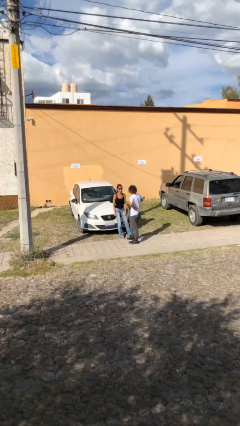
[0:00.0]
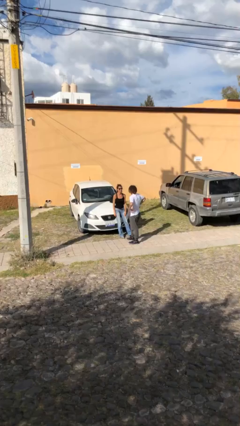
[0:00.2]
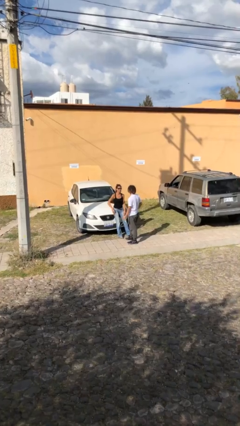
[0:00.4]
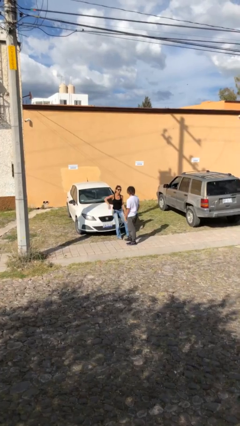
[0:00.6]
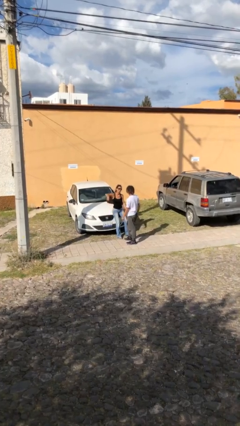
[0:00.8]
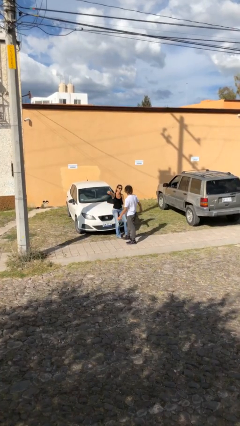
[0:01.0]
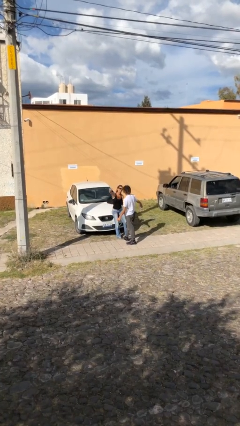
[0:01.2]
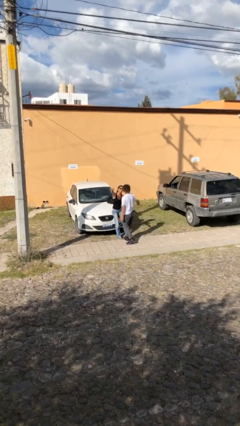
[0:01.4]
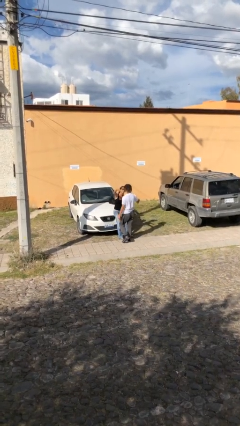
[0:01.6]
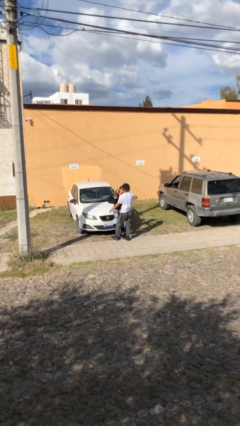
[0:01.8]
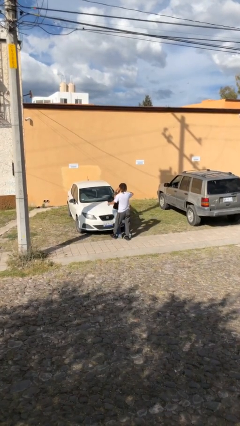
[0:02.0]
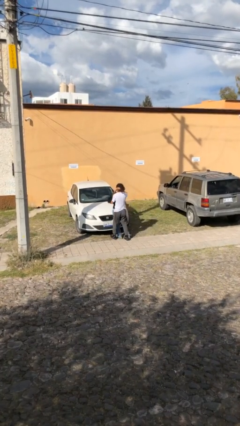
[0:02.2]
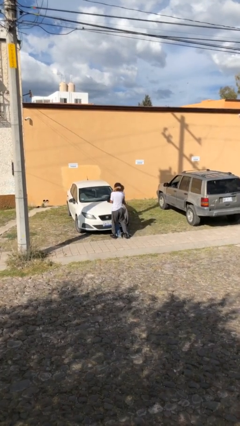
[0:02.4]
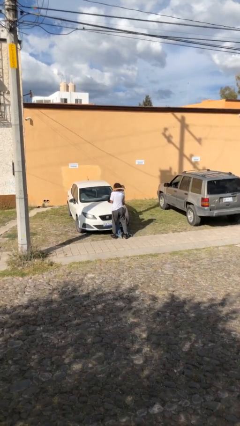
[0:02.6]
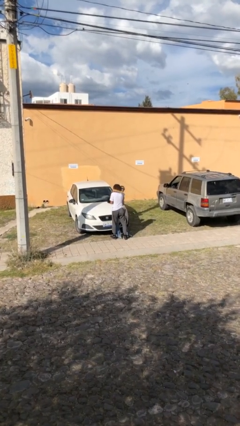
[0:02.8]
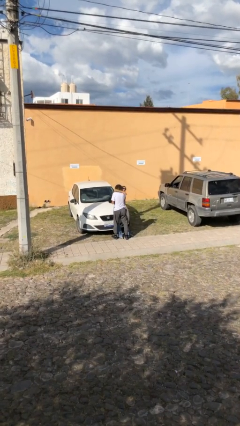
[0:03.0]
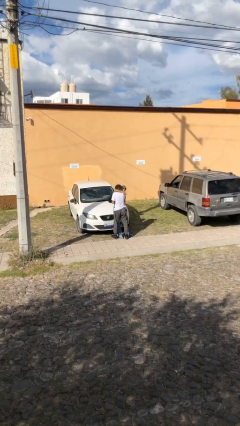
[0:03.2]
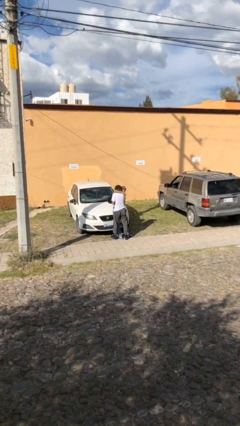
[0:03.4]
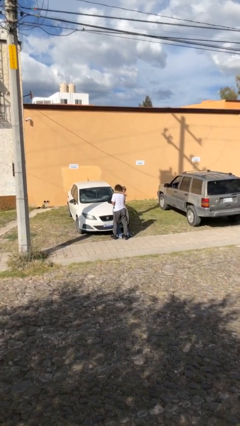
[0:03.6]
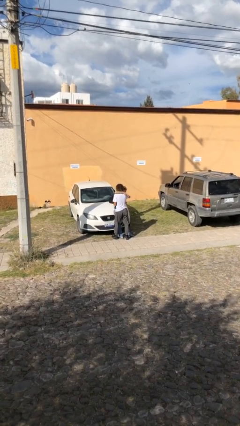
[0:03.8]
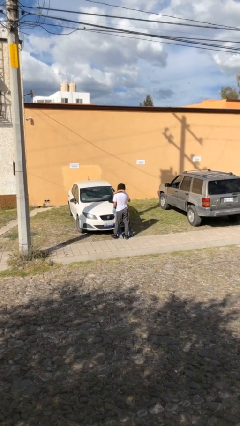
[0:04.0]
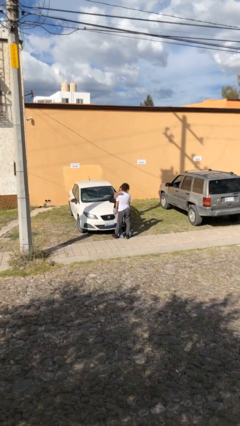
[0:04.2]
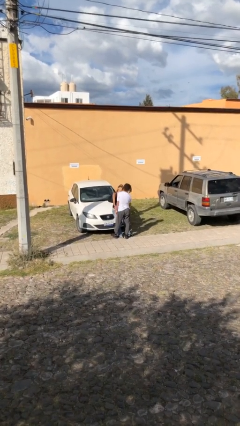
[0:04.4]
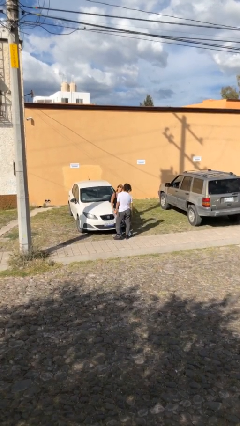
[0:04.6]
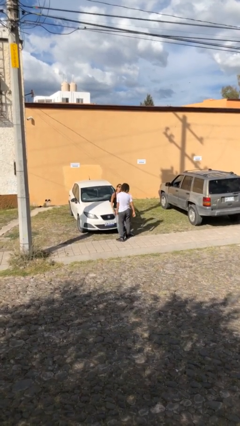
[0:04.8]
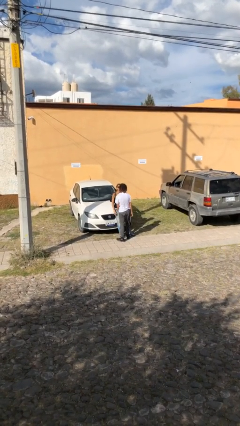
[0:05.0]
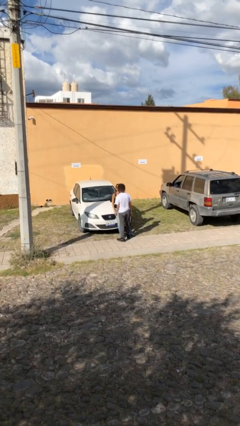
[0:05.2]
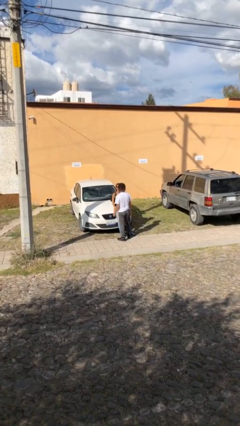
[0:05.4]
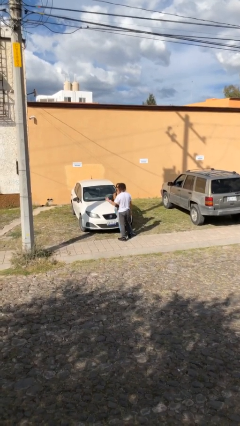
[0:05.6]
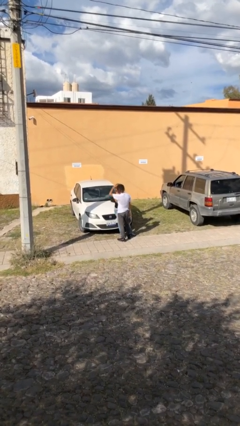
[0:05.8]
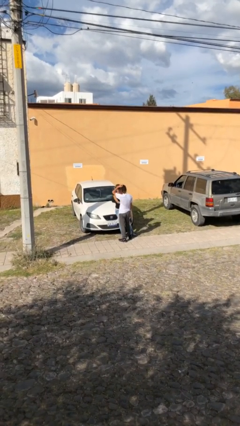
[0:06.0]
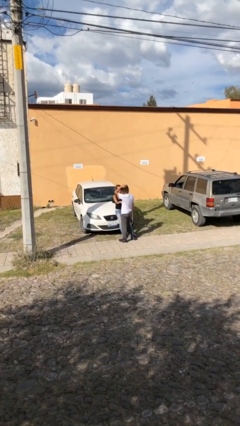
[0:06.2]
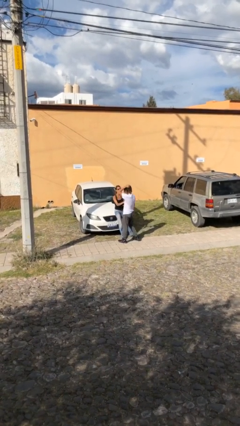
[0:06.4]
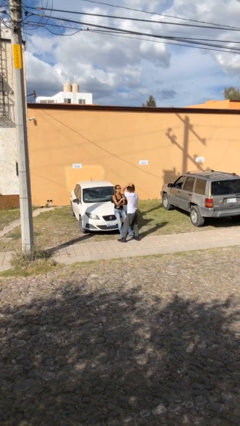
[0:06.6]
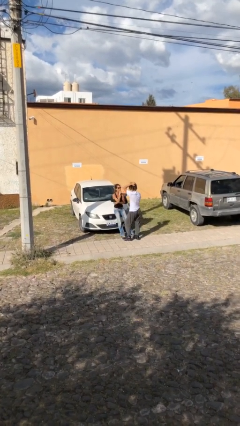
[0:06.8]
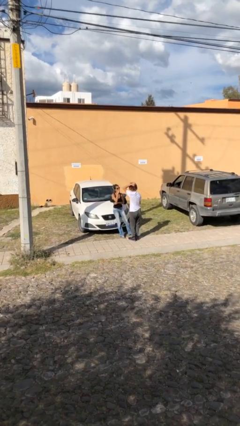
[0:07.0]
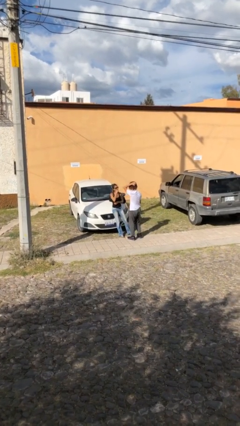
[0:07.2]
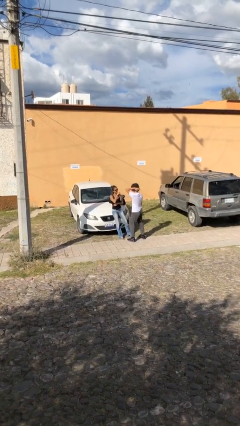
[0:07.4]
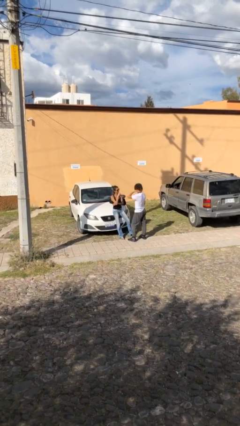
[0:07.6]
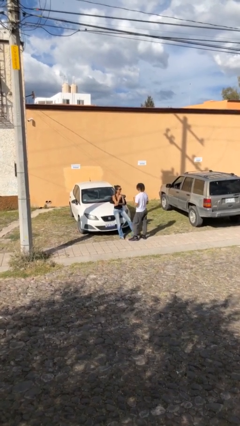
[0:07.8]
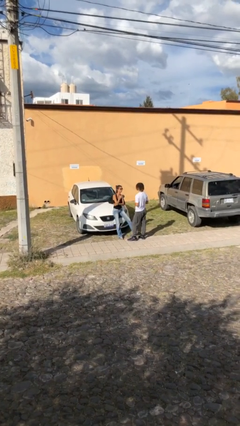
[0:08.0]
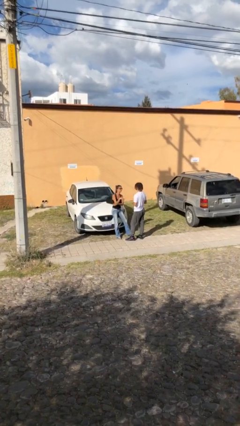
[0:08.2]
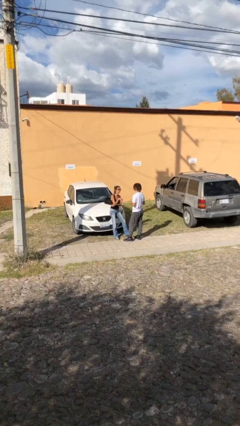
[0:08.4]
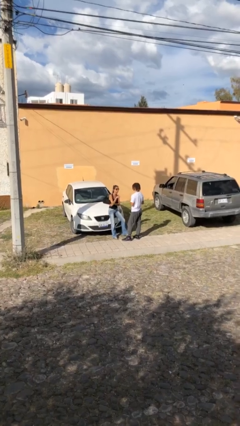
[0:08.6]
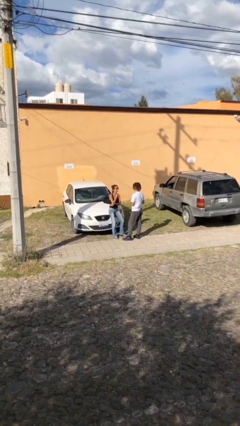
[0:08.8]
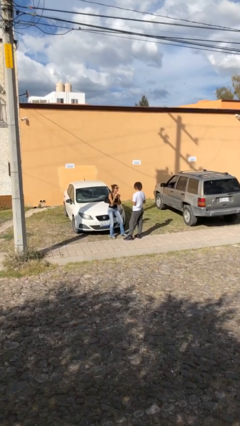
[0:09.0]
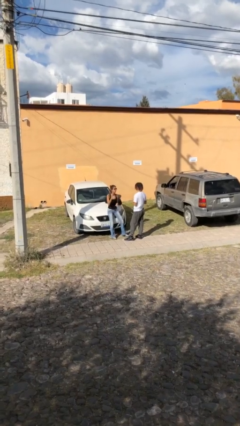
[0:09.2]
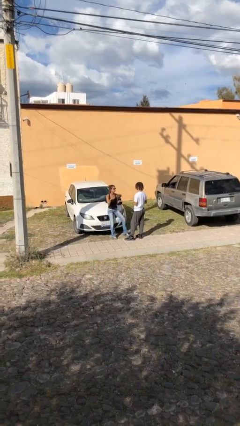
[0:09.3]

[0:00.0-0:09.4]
person embraces person

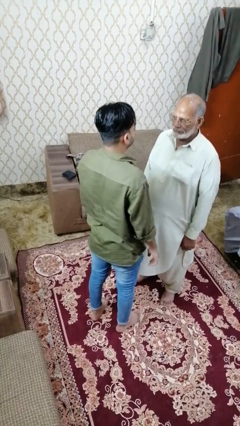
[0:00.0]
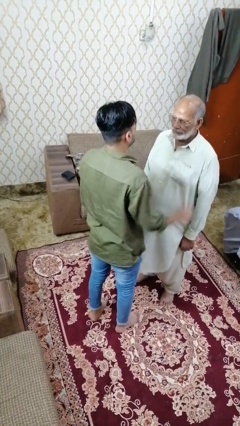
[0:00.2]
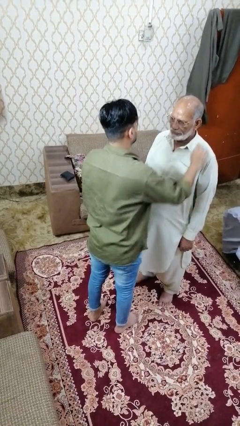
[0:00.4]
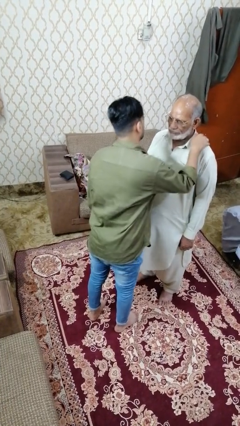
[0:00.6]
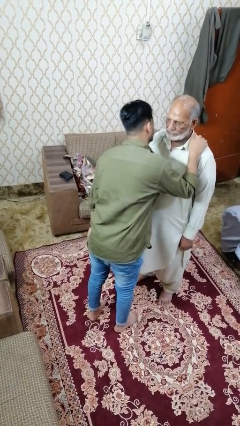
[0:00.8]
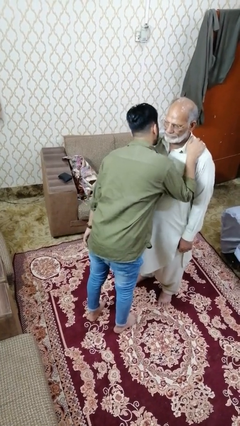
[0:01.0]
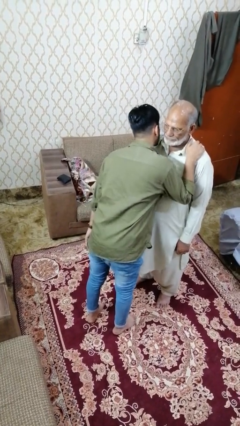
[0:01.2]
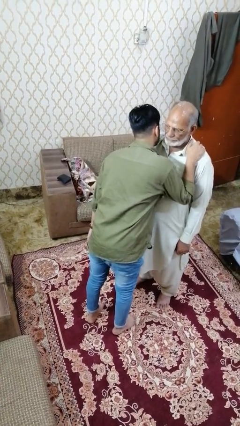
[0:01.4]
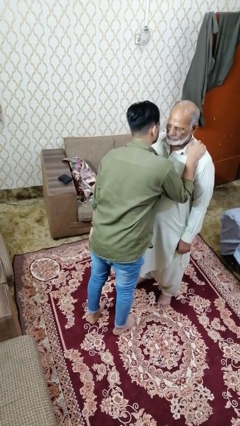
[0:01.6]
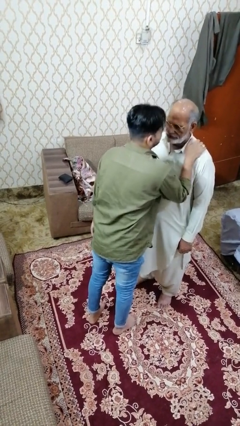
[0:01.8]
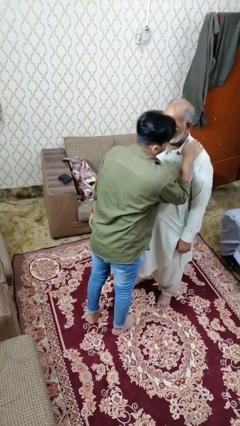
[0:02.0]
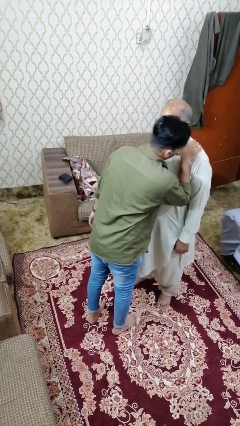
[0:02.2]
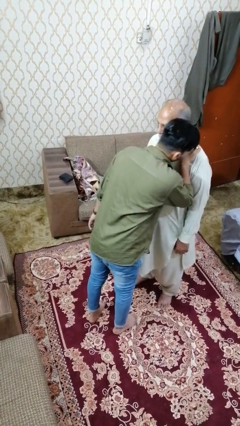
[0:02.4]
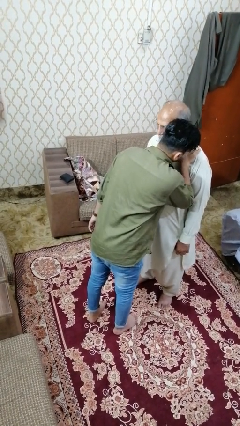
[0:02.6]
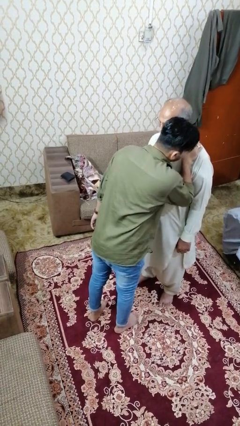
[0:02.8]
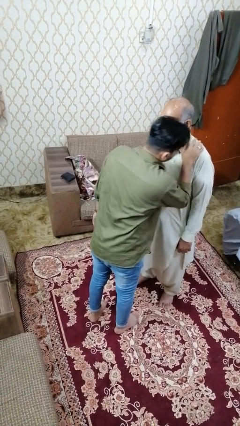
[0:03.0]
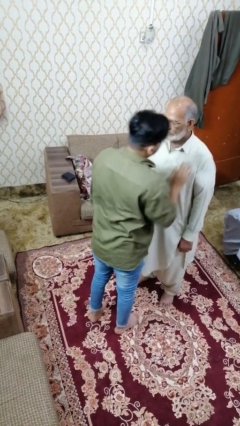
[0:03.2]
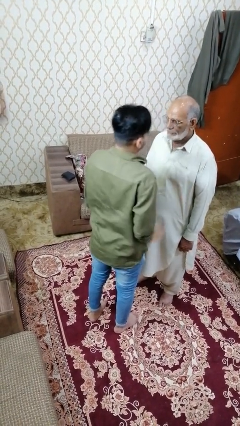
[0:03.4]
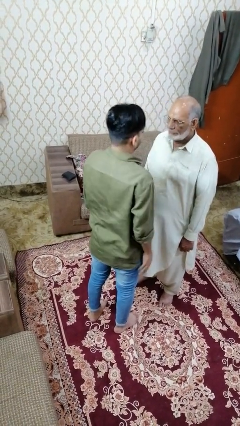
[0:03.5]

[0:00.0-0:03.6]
person kisses cheek of person

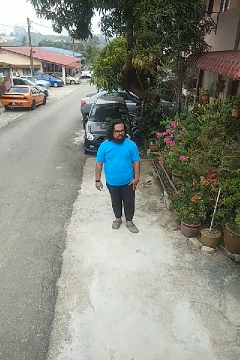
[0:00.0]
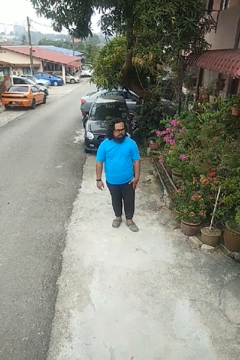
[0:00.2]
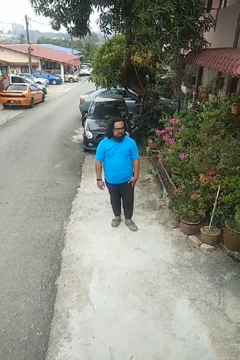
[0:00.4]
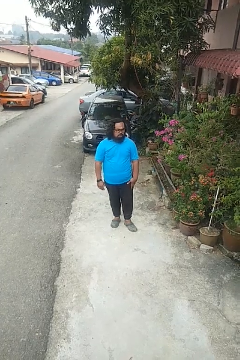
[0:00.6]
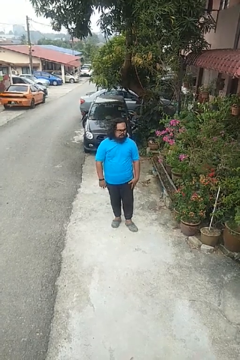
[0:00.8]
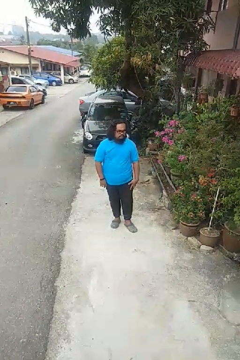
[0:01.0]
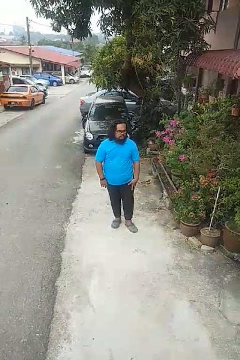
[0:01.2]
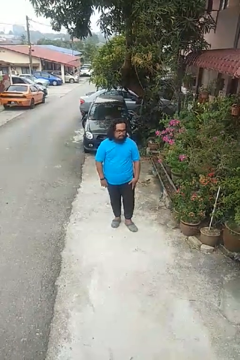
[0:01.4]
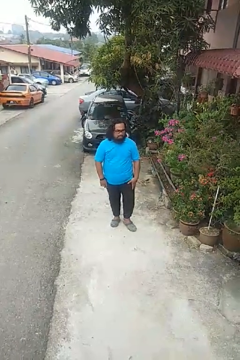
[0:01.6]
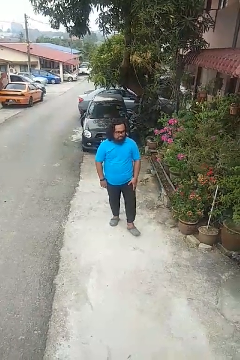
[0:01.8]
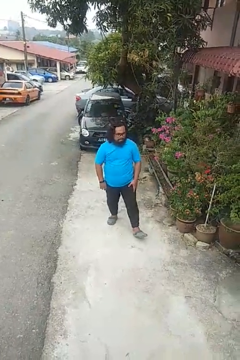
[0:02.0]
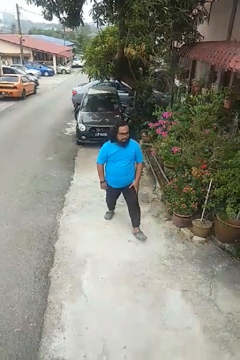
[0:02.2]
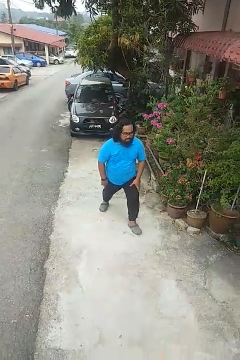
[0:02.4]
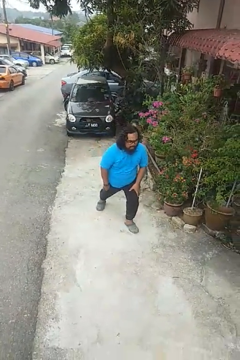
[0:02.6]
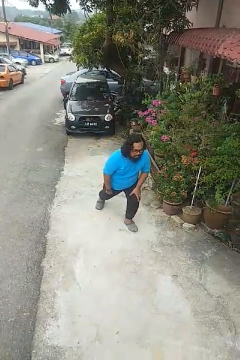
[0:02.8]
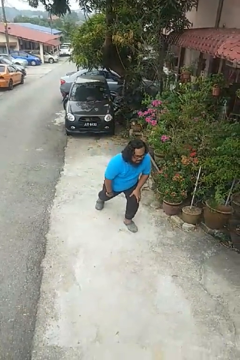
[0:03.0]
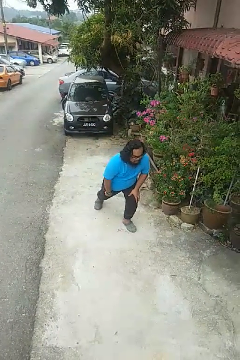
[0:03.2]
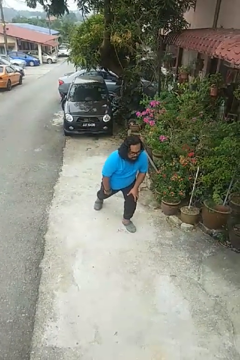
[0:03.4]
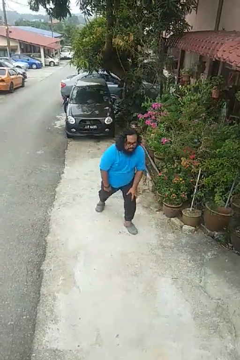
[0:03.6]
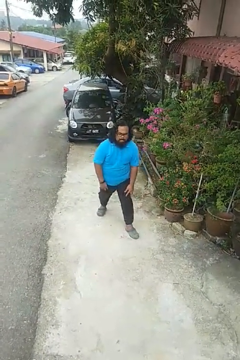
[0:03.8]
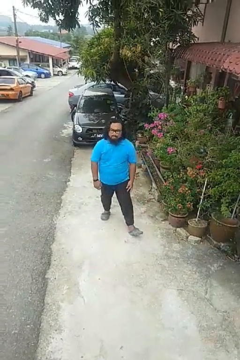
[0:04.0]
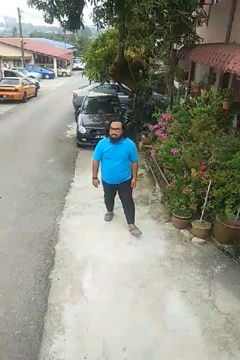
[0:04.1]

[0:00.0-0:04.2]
person exercises with lunges

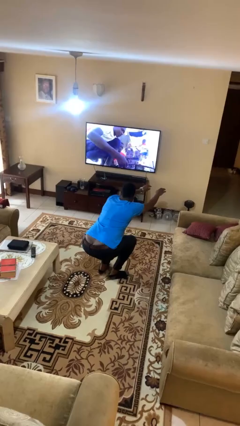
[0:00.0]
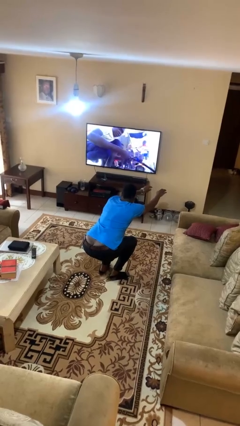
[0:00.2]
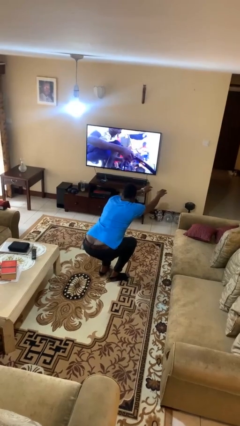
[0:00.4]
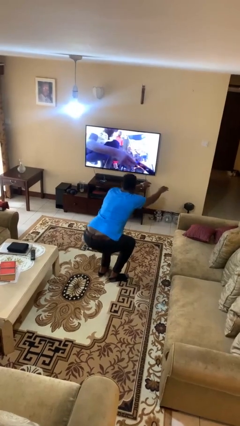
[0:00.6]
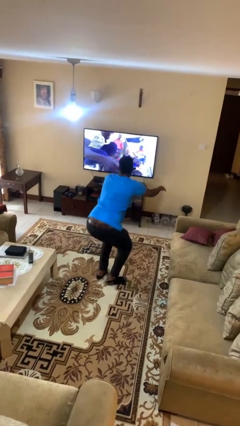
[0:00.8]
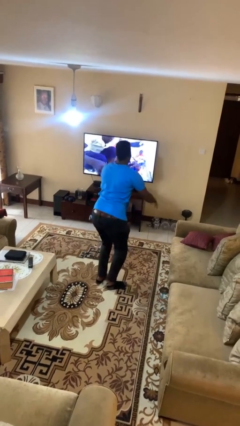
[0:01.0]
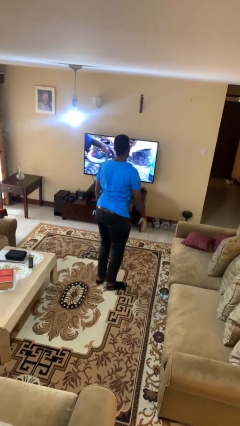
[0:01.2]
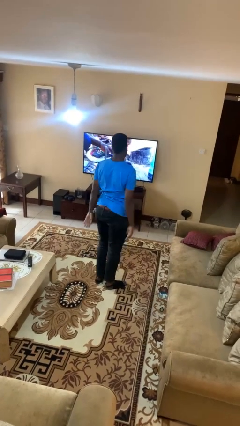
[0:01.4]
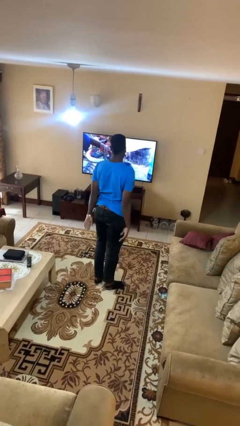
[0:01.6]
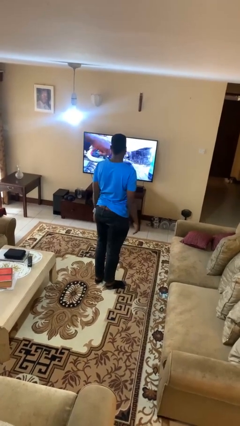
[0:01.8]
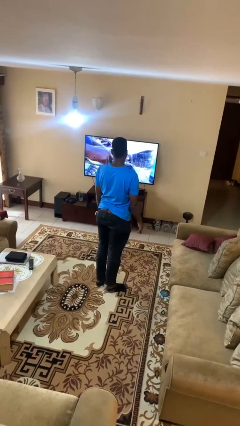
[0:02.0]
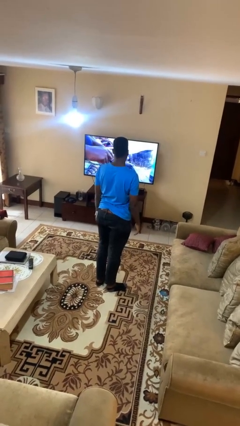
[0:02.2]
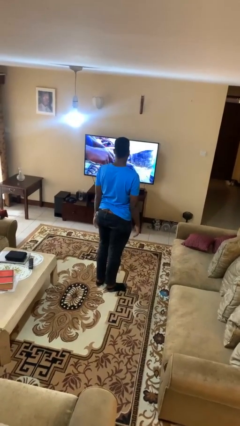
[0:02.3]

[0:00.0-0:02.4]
person stands up
